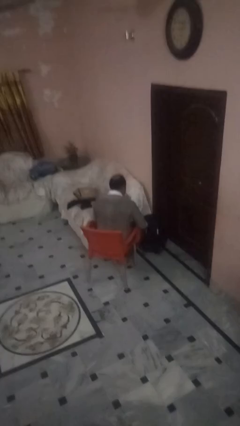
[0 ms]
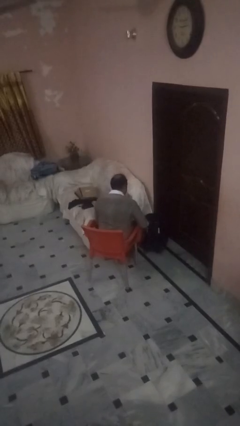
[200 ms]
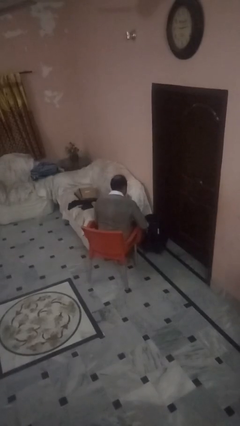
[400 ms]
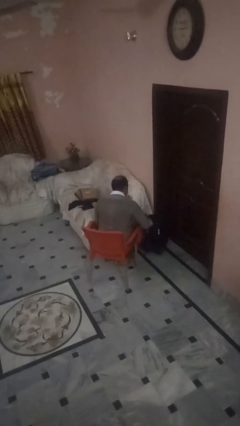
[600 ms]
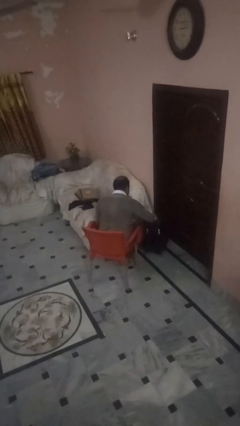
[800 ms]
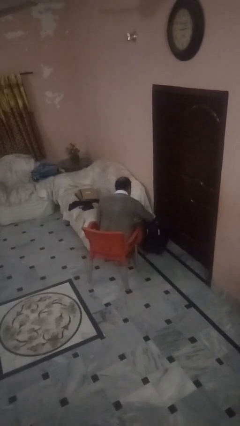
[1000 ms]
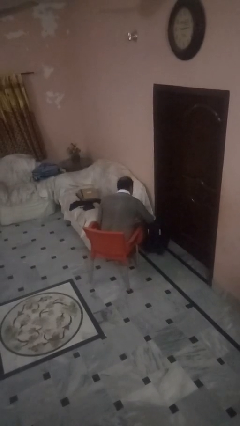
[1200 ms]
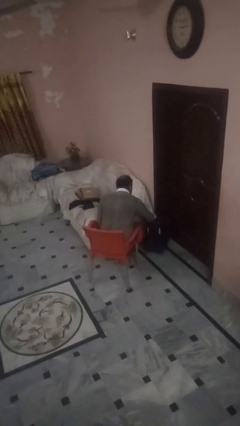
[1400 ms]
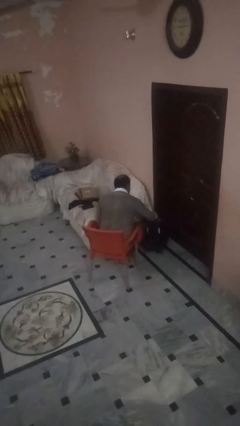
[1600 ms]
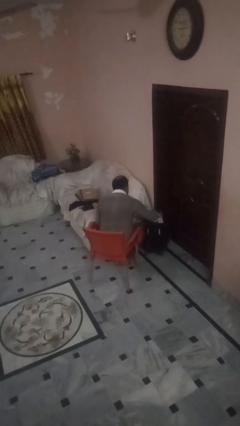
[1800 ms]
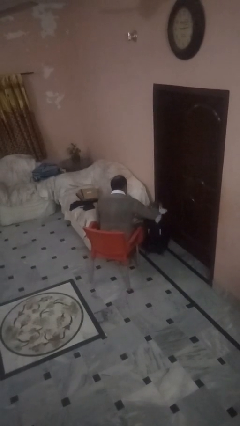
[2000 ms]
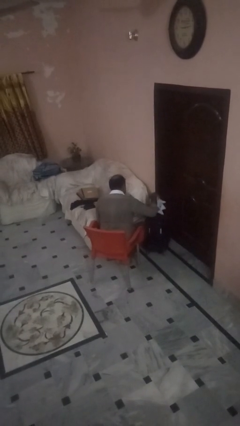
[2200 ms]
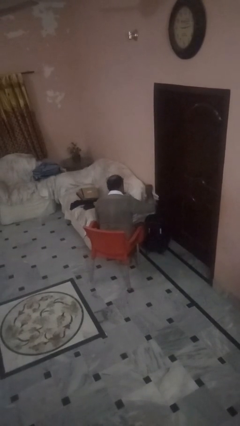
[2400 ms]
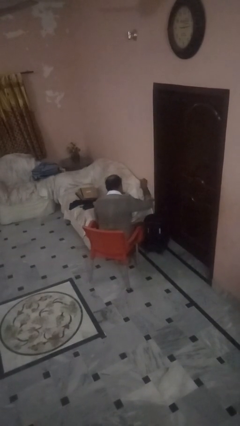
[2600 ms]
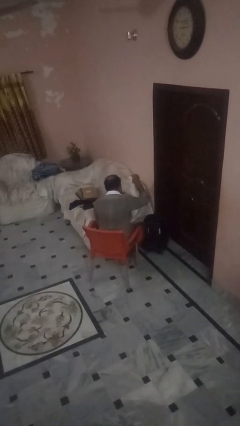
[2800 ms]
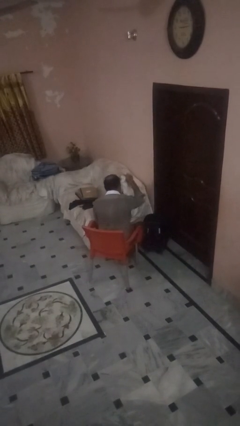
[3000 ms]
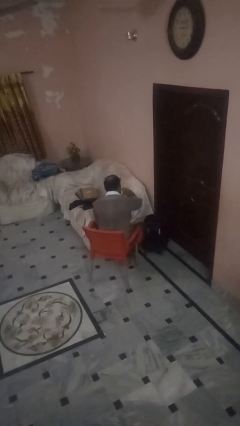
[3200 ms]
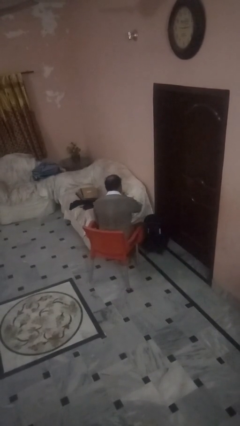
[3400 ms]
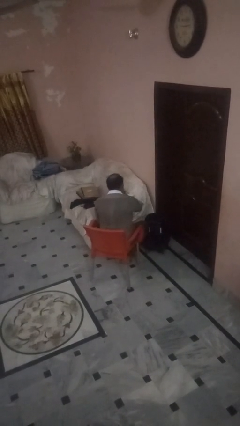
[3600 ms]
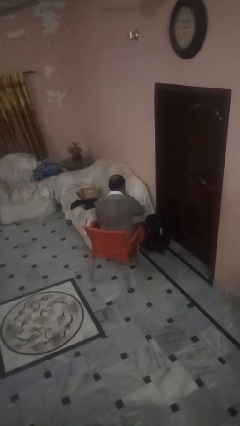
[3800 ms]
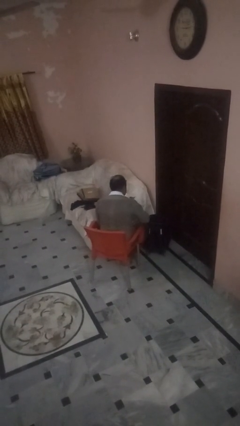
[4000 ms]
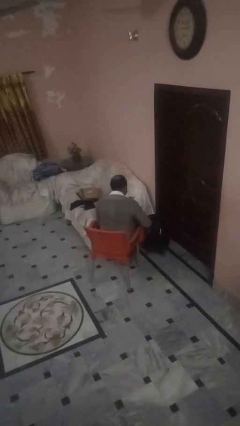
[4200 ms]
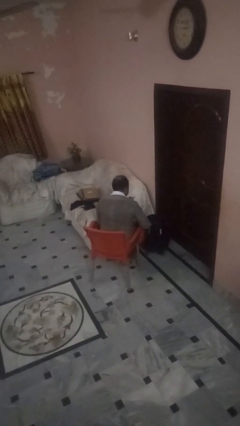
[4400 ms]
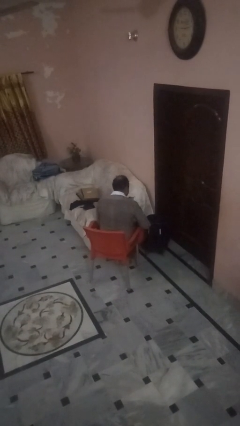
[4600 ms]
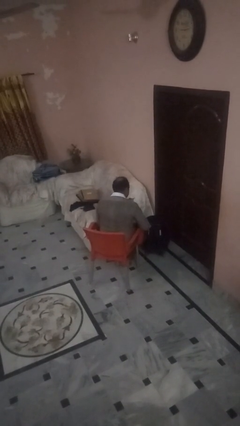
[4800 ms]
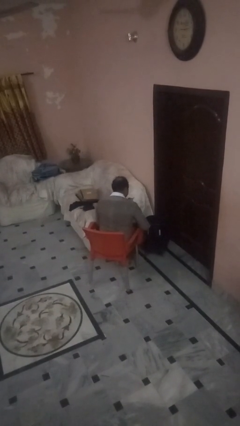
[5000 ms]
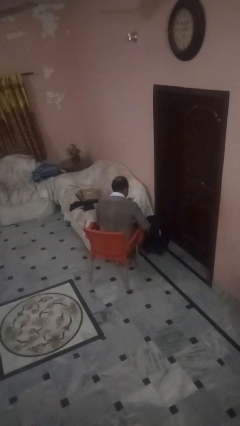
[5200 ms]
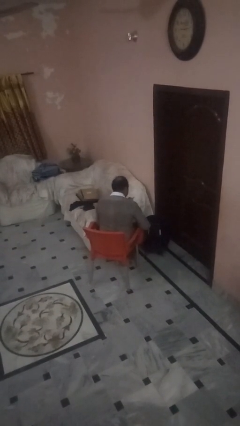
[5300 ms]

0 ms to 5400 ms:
person unloads clothes from suitcase

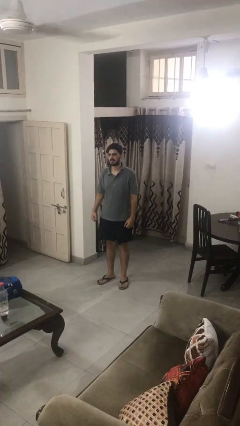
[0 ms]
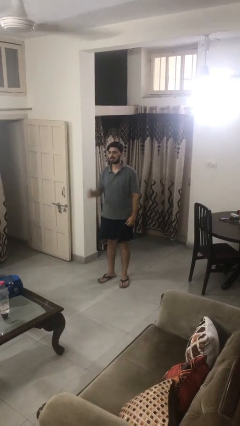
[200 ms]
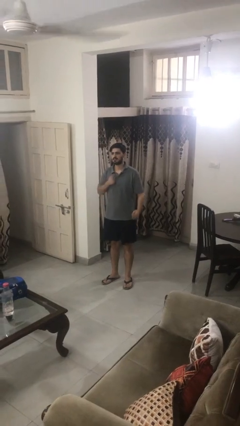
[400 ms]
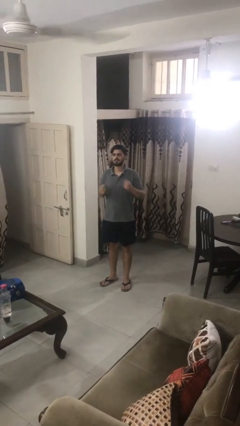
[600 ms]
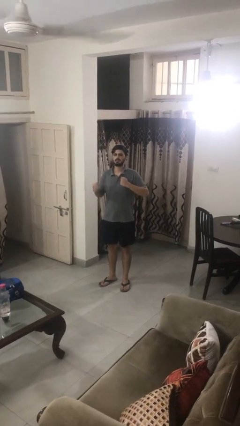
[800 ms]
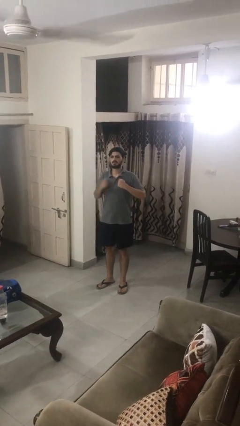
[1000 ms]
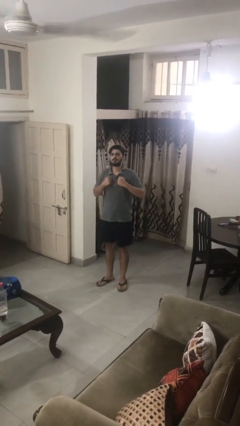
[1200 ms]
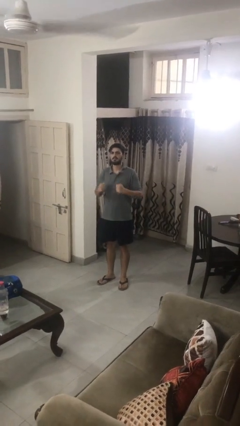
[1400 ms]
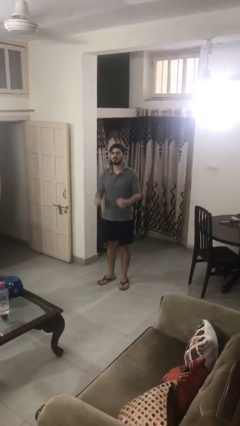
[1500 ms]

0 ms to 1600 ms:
person drums on chest

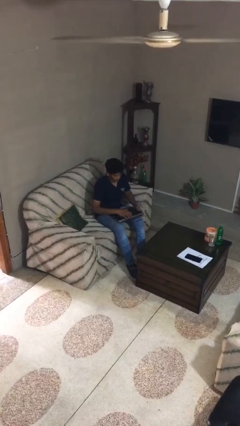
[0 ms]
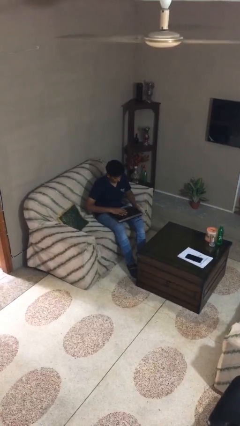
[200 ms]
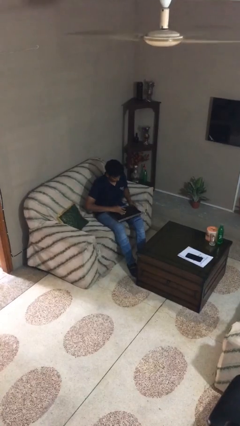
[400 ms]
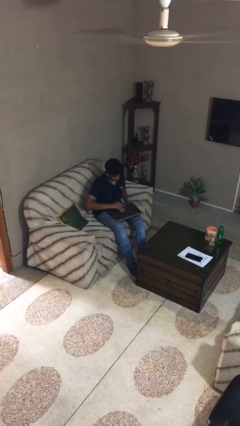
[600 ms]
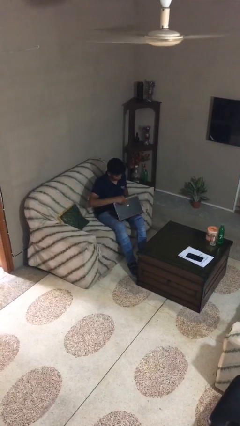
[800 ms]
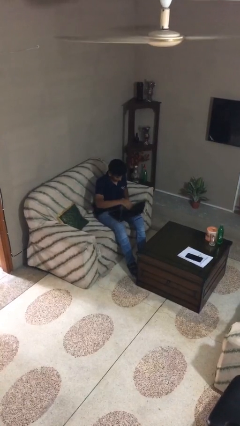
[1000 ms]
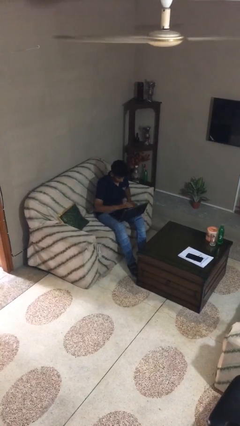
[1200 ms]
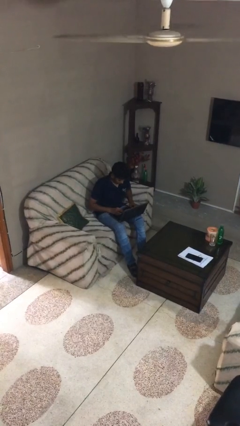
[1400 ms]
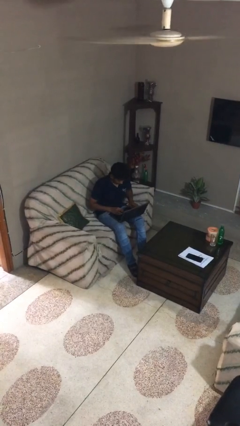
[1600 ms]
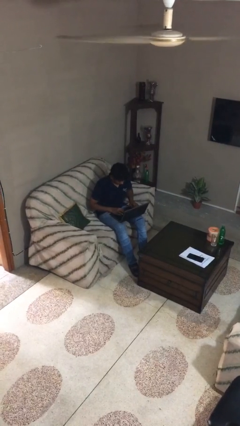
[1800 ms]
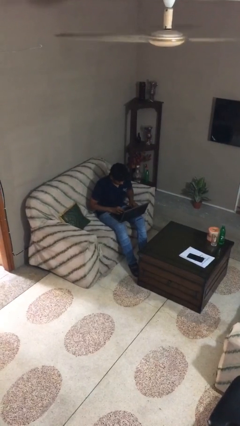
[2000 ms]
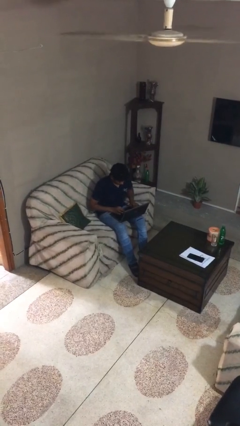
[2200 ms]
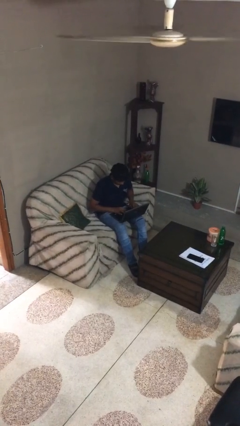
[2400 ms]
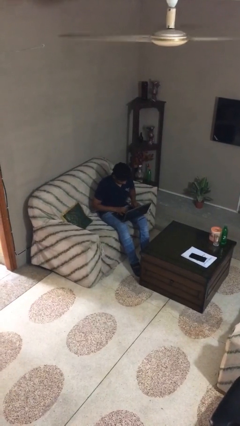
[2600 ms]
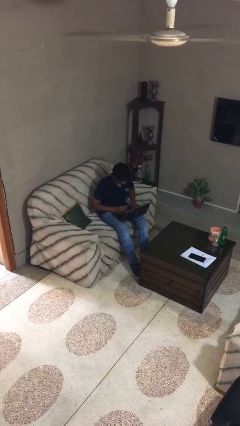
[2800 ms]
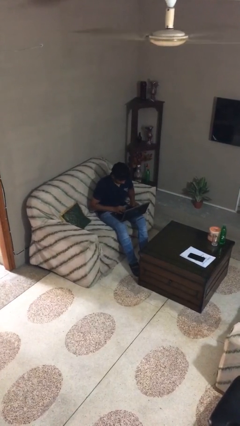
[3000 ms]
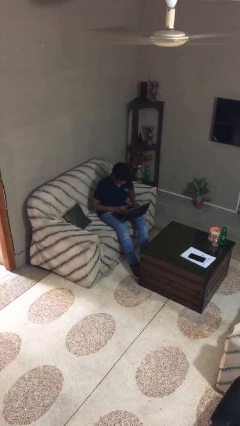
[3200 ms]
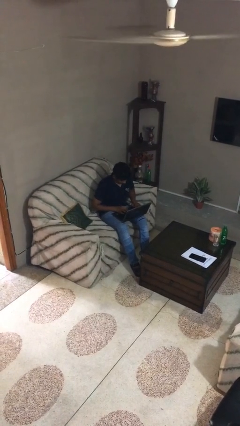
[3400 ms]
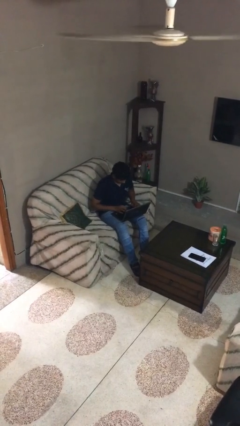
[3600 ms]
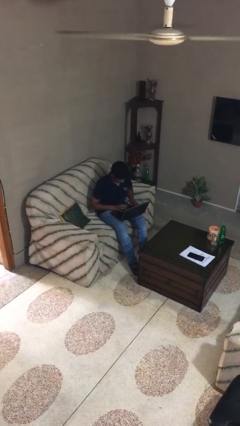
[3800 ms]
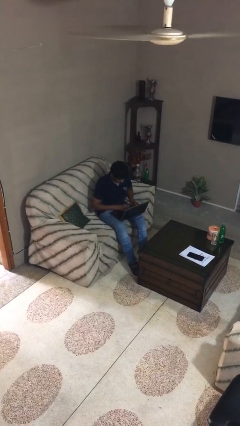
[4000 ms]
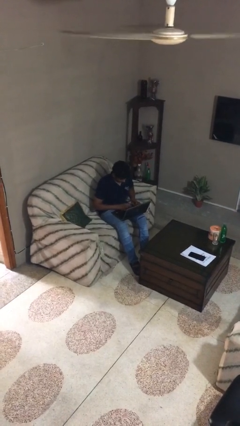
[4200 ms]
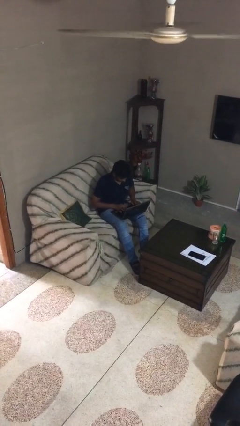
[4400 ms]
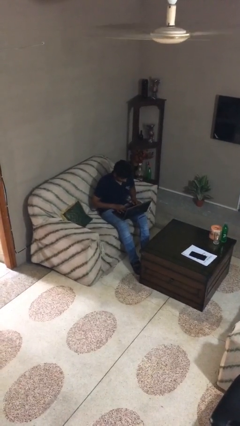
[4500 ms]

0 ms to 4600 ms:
person interacts with laptop

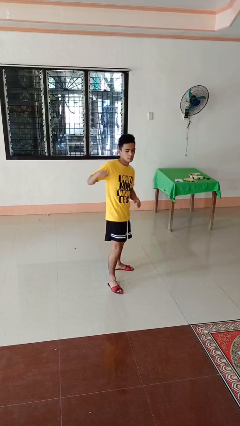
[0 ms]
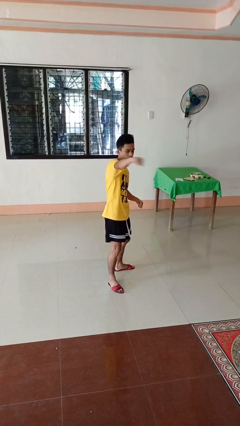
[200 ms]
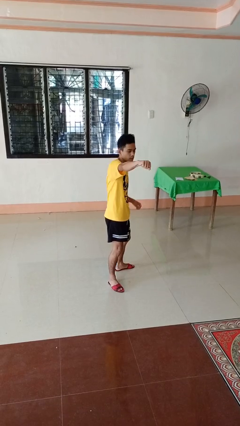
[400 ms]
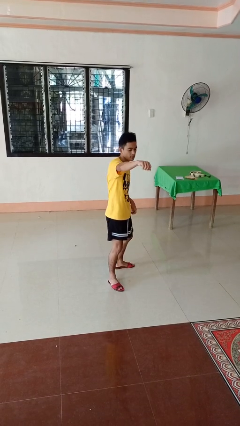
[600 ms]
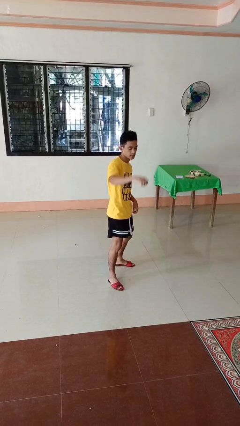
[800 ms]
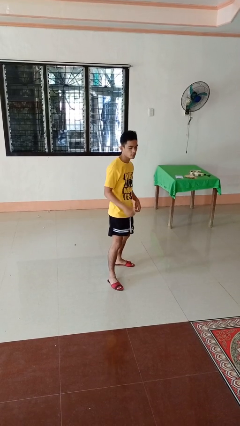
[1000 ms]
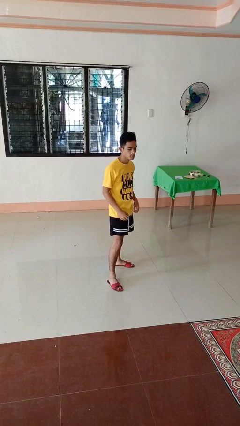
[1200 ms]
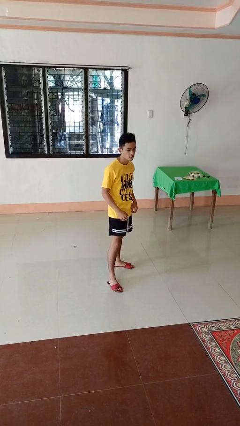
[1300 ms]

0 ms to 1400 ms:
person punches

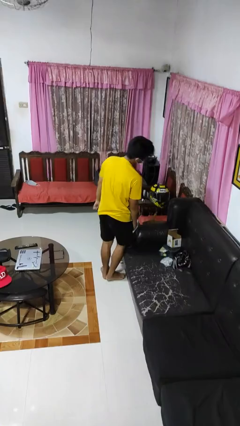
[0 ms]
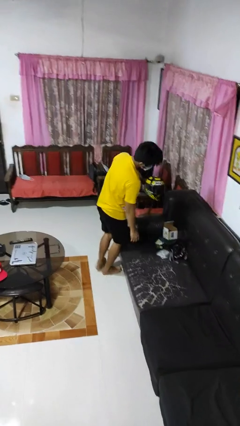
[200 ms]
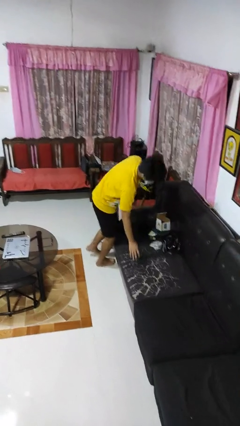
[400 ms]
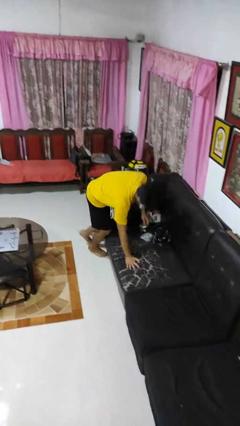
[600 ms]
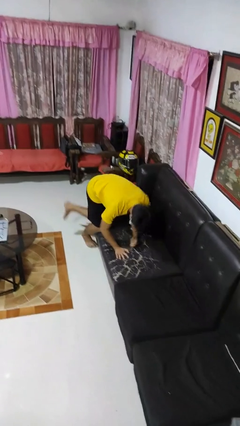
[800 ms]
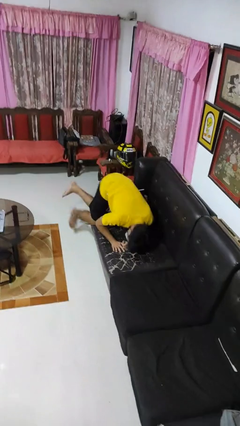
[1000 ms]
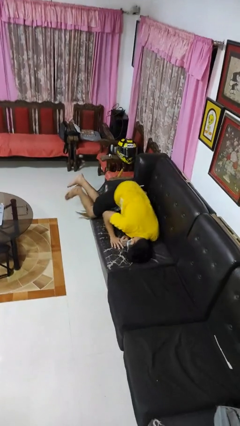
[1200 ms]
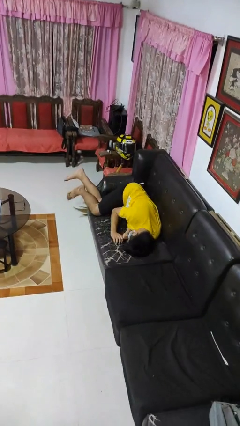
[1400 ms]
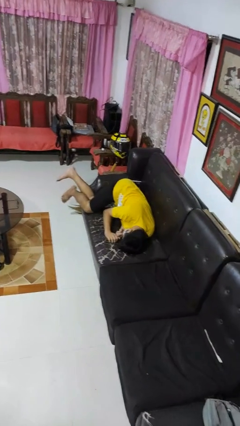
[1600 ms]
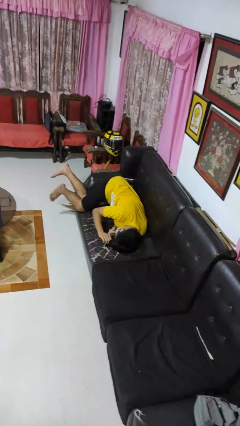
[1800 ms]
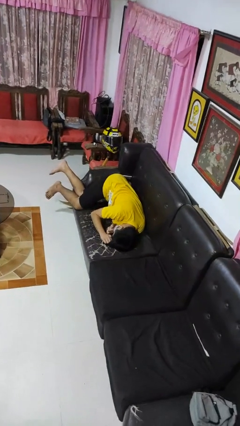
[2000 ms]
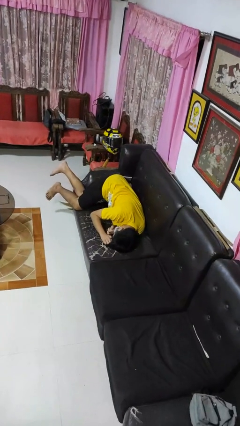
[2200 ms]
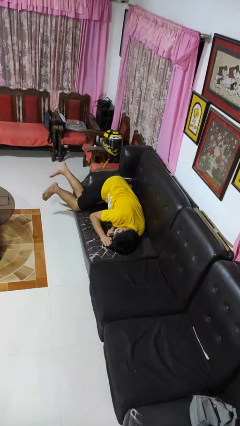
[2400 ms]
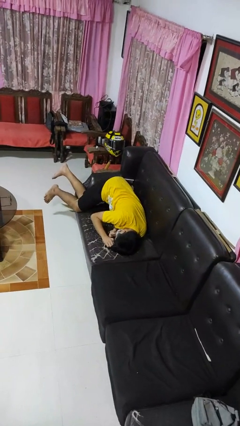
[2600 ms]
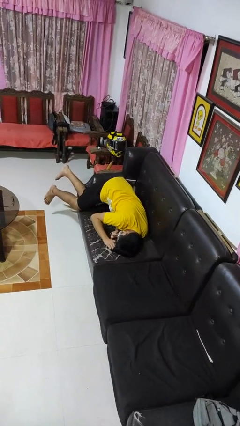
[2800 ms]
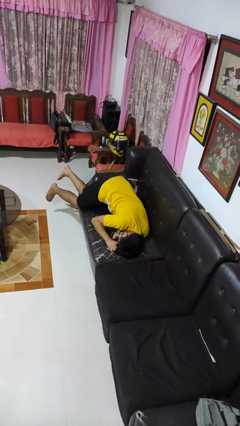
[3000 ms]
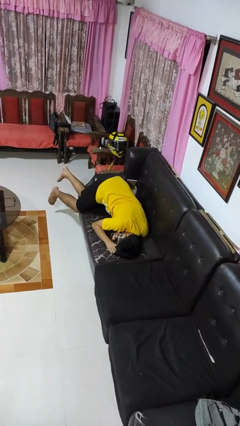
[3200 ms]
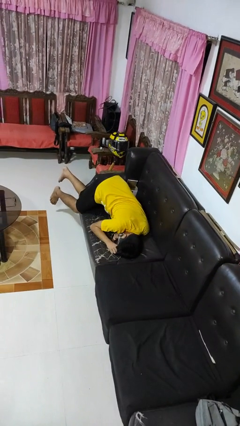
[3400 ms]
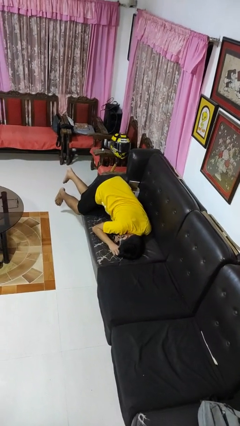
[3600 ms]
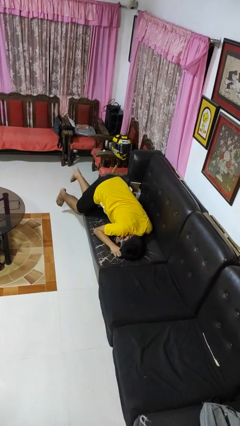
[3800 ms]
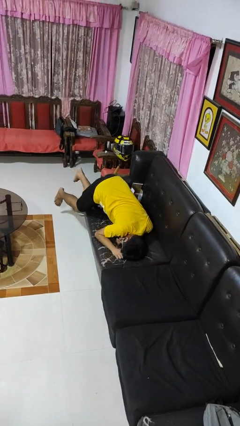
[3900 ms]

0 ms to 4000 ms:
person lies down on couch

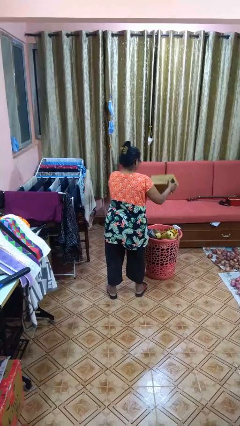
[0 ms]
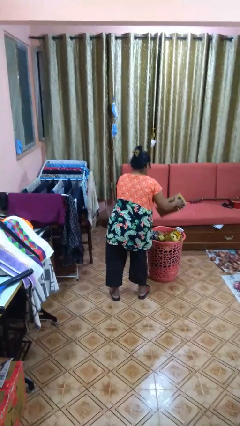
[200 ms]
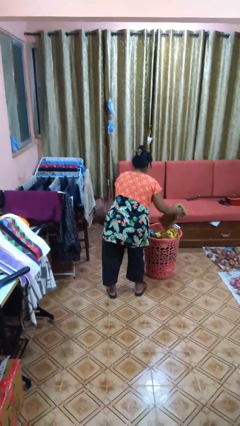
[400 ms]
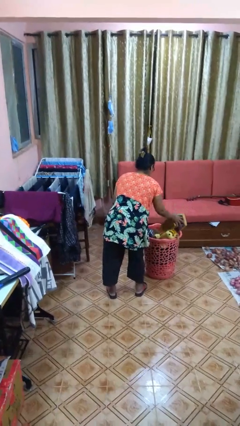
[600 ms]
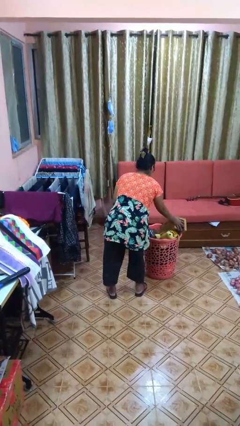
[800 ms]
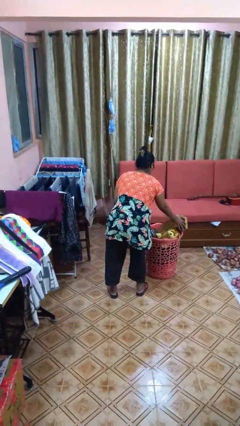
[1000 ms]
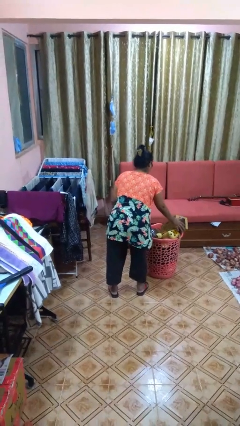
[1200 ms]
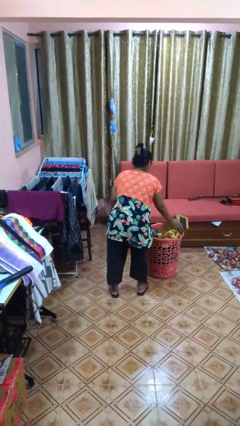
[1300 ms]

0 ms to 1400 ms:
person puts object into basket
